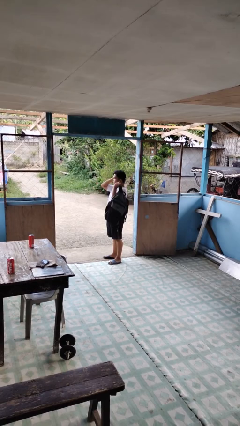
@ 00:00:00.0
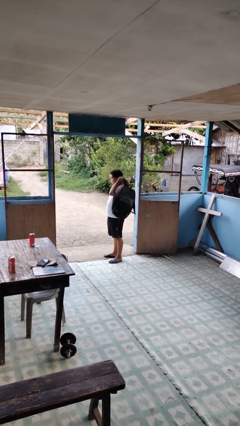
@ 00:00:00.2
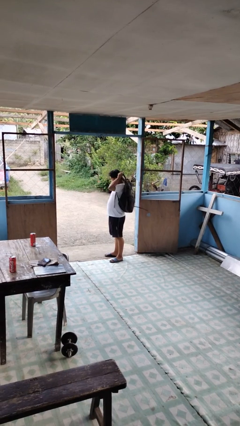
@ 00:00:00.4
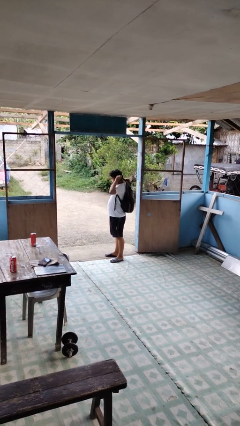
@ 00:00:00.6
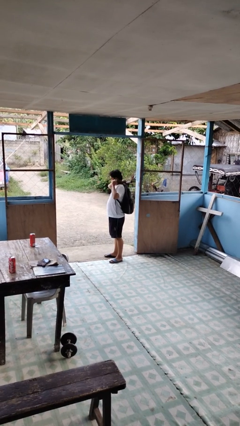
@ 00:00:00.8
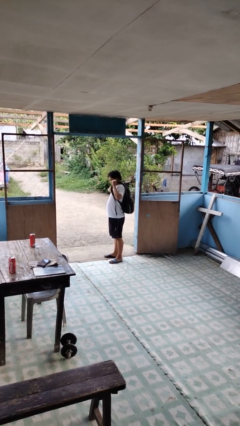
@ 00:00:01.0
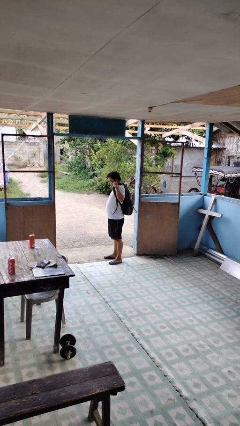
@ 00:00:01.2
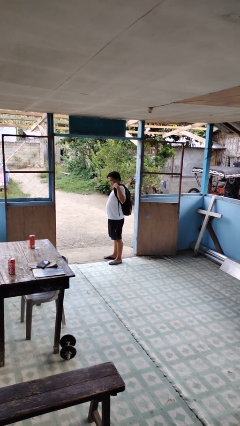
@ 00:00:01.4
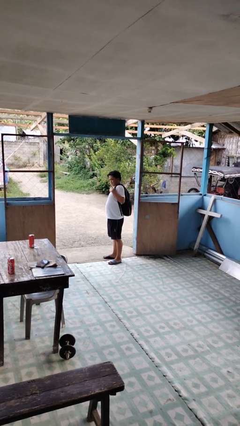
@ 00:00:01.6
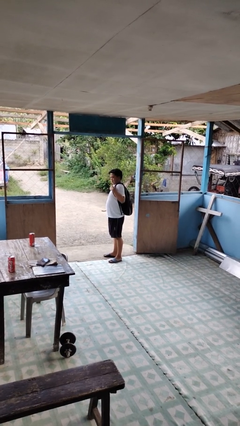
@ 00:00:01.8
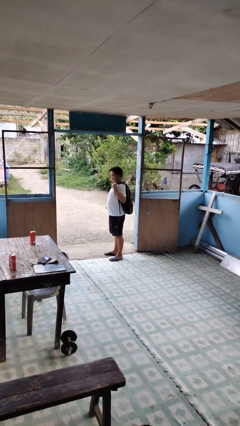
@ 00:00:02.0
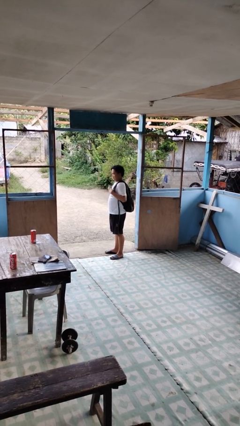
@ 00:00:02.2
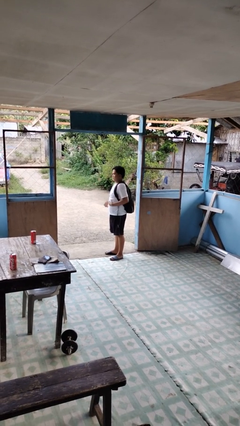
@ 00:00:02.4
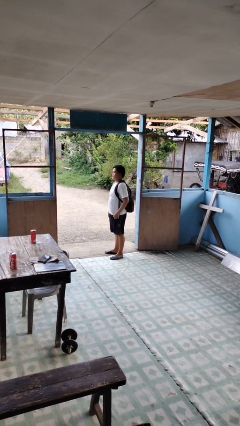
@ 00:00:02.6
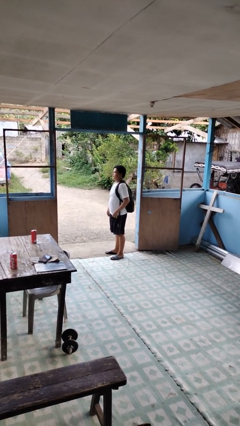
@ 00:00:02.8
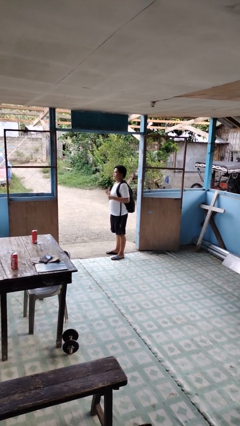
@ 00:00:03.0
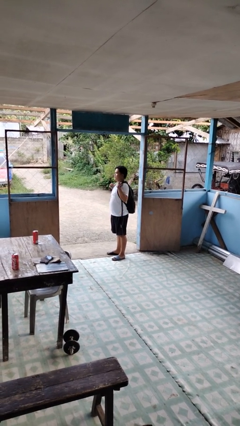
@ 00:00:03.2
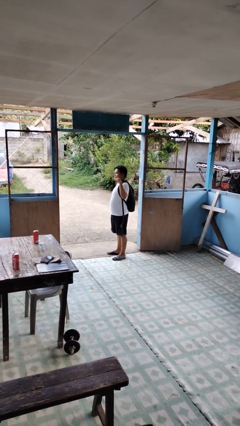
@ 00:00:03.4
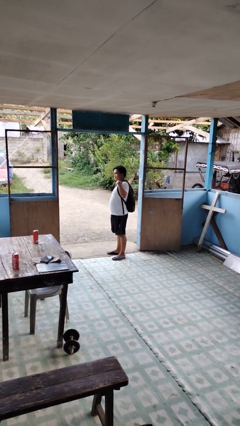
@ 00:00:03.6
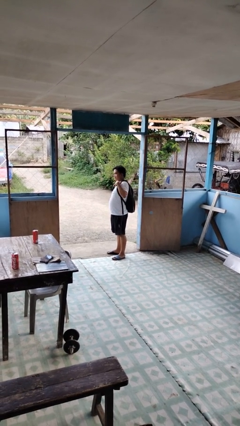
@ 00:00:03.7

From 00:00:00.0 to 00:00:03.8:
person puts on backpack

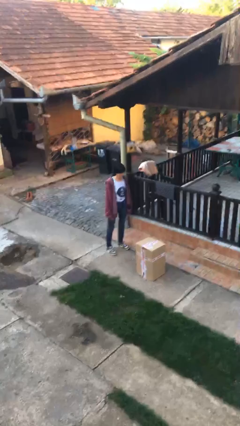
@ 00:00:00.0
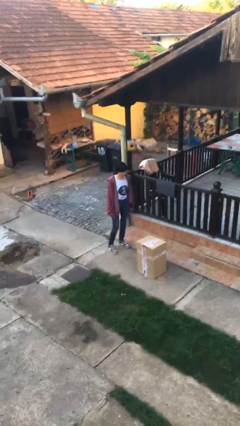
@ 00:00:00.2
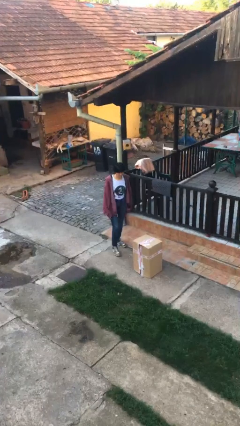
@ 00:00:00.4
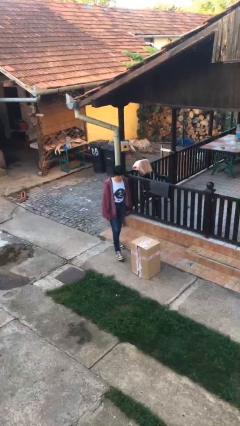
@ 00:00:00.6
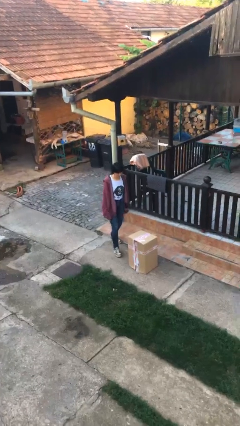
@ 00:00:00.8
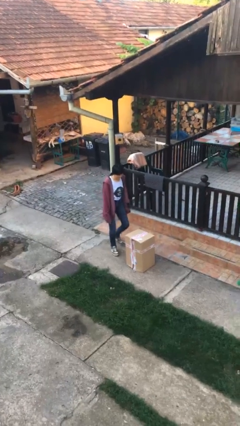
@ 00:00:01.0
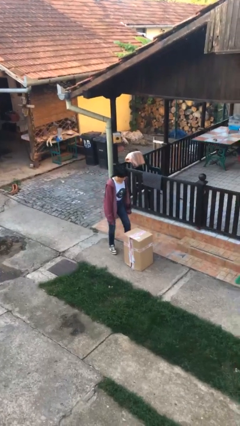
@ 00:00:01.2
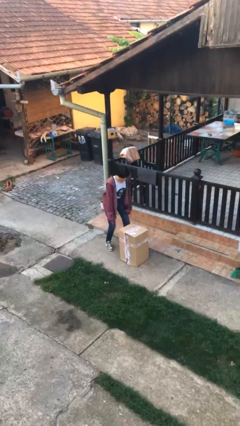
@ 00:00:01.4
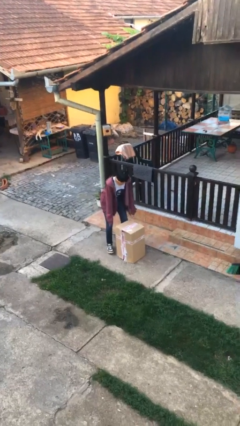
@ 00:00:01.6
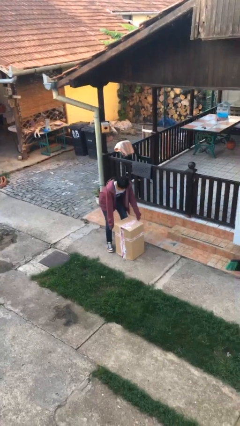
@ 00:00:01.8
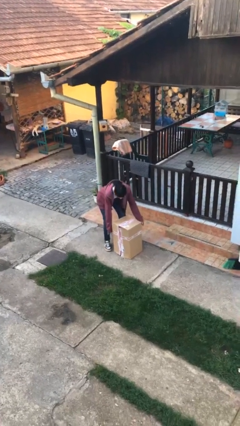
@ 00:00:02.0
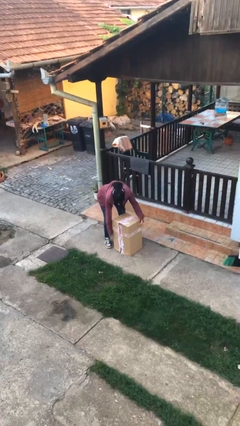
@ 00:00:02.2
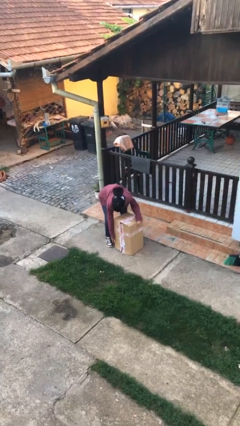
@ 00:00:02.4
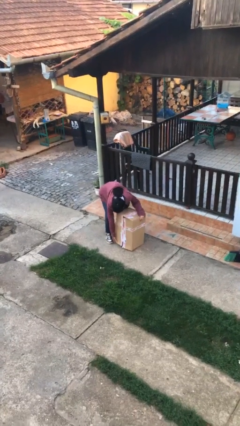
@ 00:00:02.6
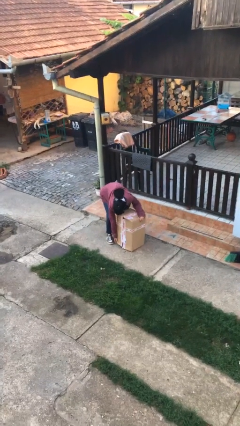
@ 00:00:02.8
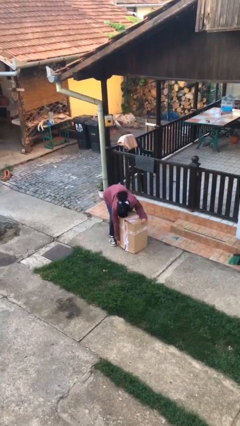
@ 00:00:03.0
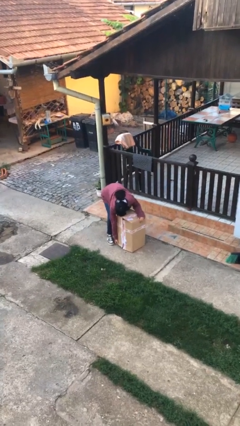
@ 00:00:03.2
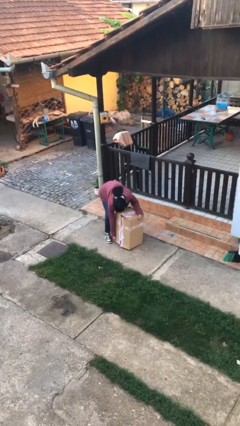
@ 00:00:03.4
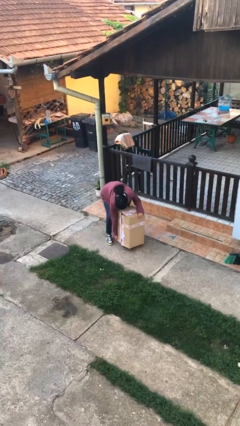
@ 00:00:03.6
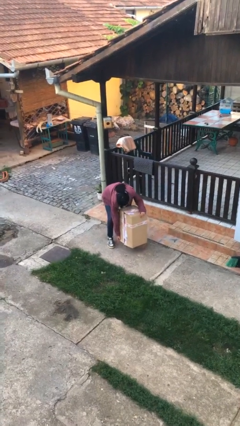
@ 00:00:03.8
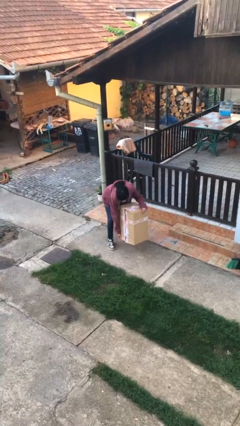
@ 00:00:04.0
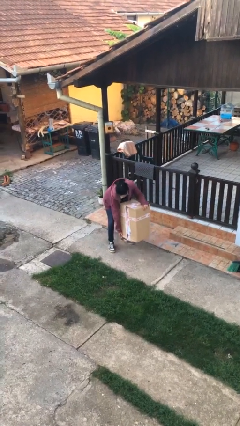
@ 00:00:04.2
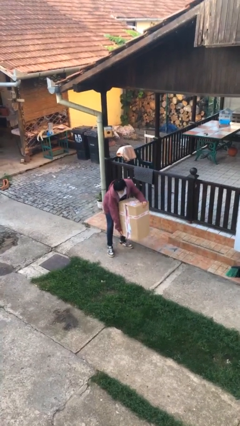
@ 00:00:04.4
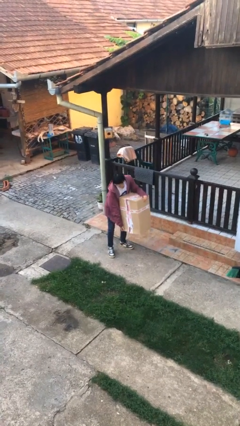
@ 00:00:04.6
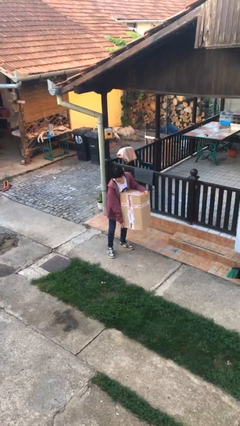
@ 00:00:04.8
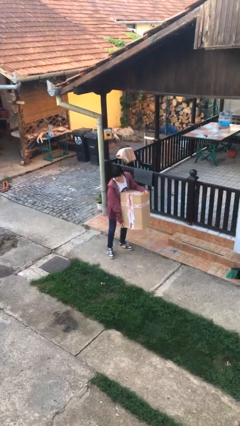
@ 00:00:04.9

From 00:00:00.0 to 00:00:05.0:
person picks up object from floor

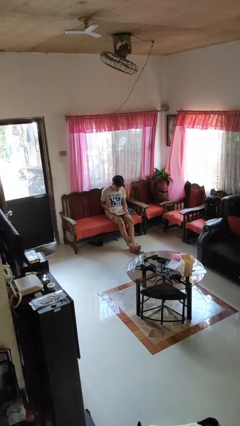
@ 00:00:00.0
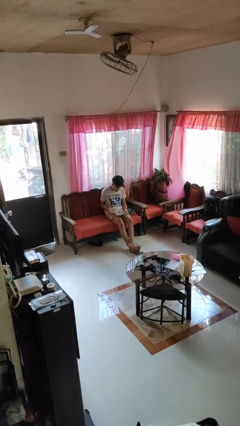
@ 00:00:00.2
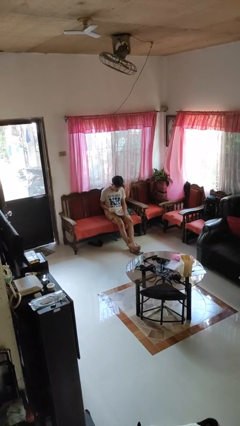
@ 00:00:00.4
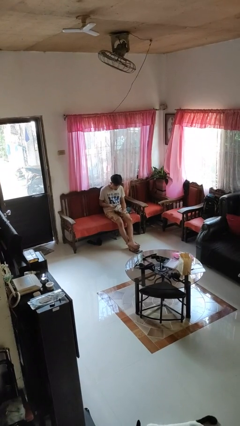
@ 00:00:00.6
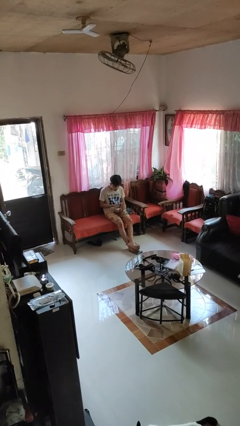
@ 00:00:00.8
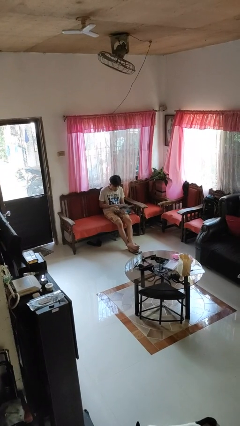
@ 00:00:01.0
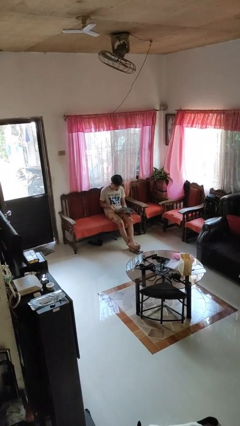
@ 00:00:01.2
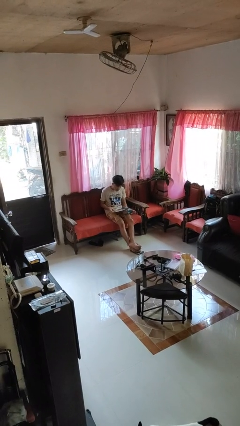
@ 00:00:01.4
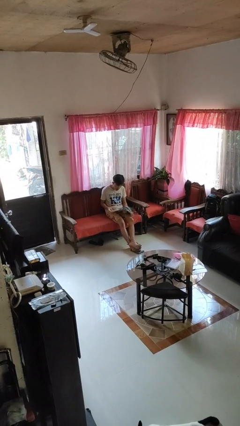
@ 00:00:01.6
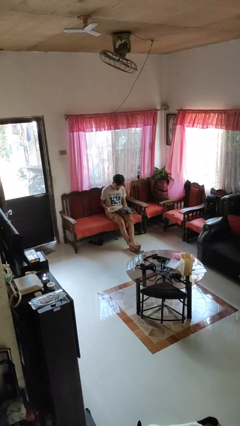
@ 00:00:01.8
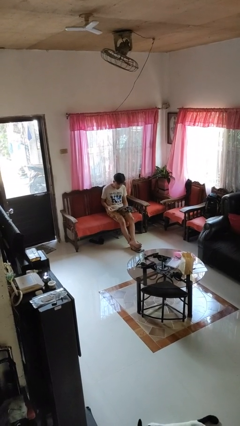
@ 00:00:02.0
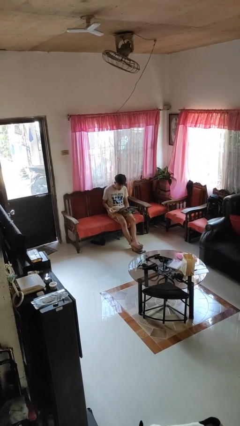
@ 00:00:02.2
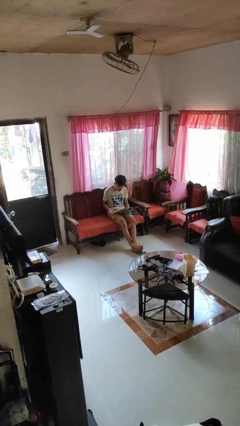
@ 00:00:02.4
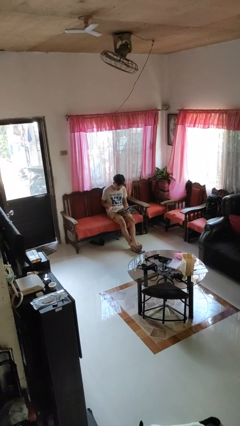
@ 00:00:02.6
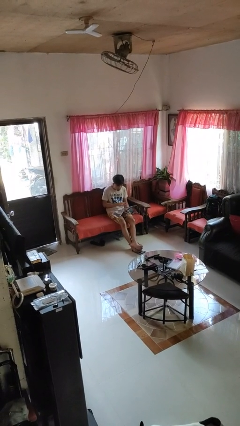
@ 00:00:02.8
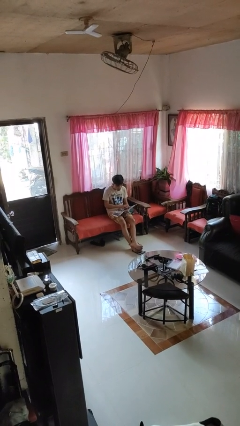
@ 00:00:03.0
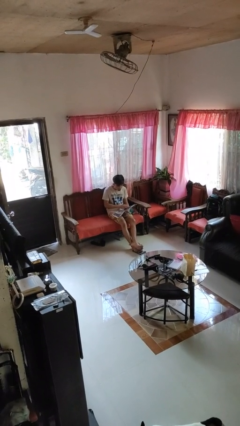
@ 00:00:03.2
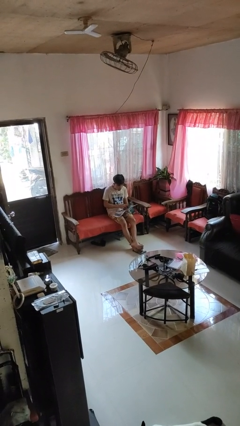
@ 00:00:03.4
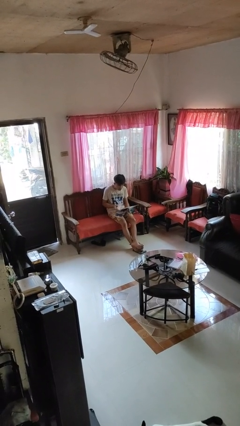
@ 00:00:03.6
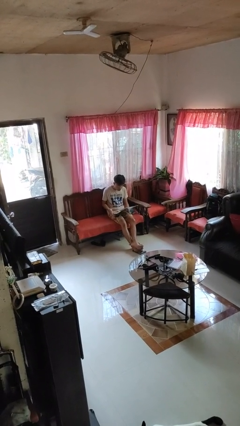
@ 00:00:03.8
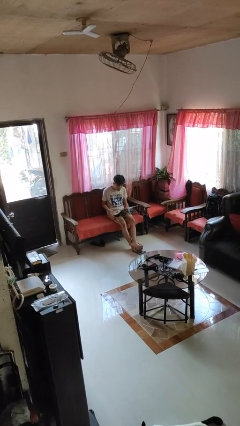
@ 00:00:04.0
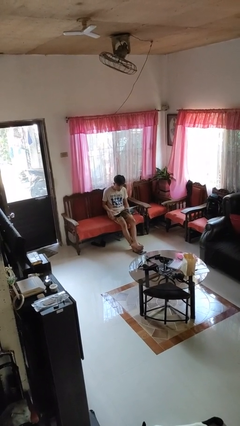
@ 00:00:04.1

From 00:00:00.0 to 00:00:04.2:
person reads magazine

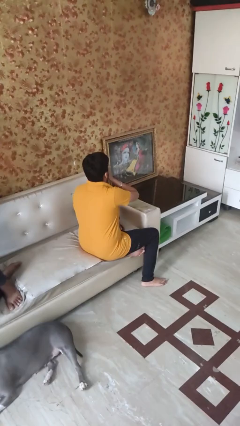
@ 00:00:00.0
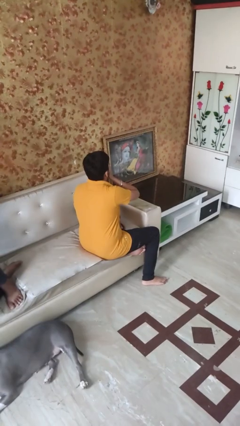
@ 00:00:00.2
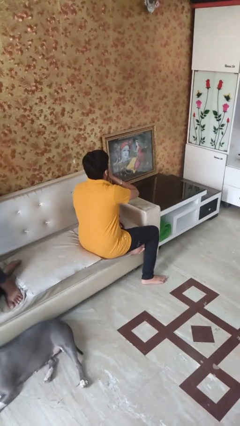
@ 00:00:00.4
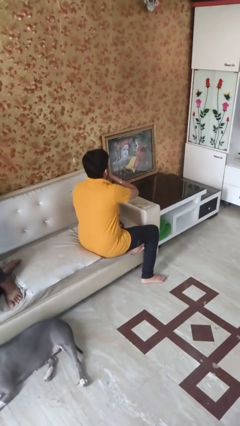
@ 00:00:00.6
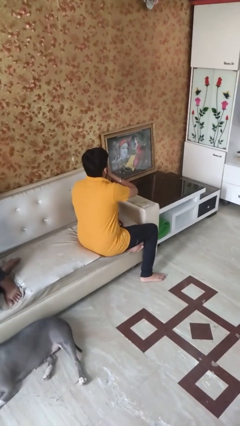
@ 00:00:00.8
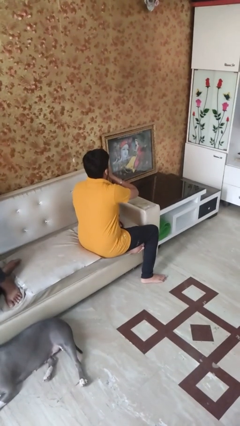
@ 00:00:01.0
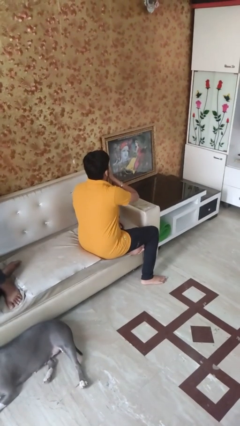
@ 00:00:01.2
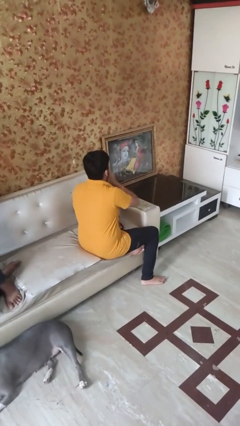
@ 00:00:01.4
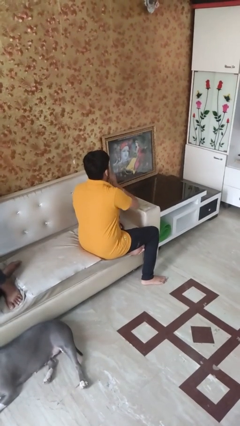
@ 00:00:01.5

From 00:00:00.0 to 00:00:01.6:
person yawns

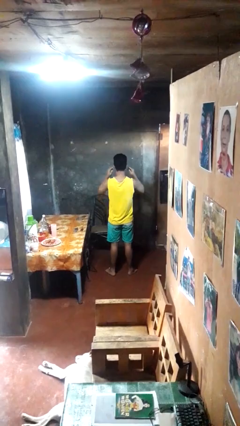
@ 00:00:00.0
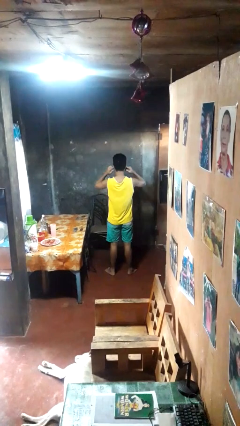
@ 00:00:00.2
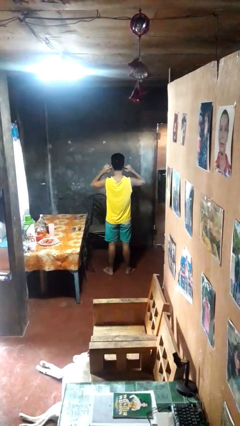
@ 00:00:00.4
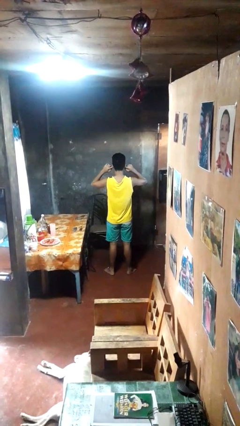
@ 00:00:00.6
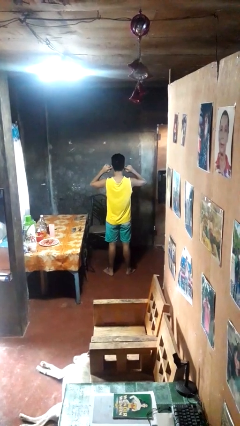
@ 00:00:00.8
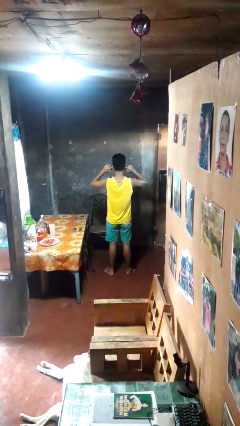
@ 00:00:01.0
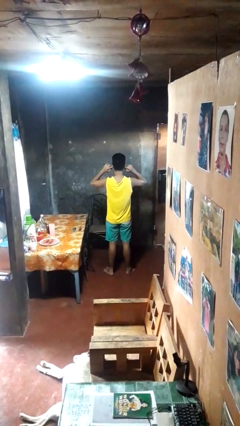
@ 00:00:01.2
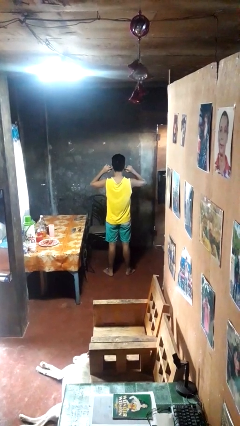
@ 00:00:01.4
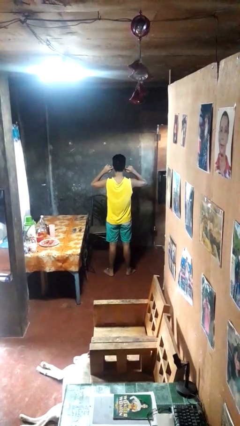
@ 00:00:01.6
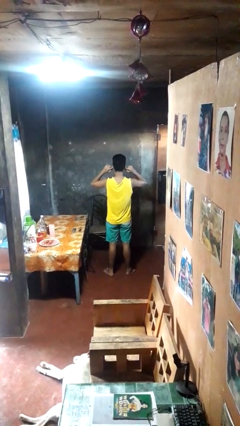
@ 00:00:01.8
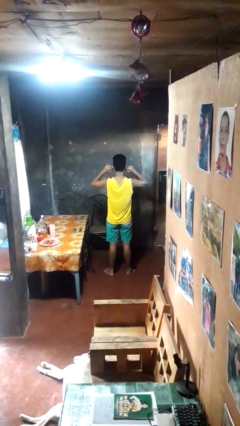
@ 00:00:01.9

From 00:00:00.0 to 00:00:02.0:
person puts fingers in ear
